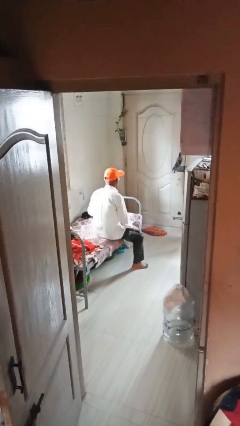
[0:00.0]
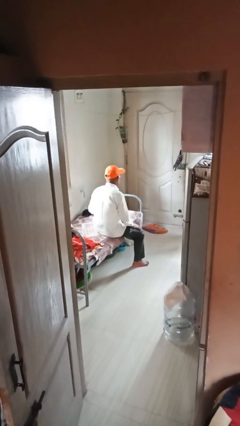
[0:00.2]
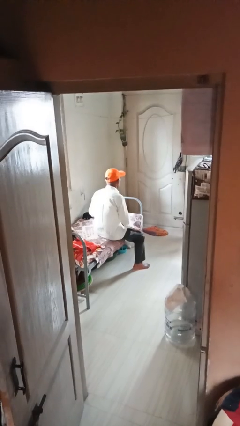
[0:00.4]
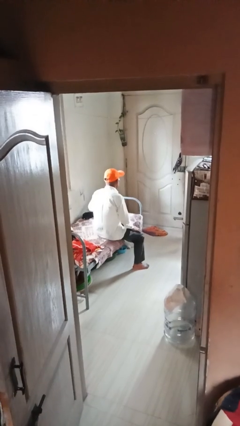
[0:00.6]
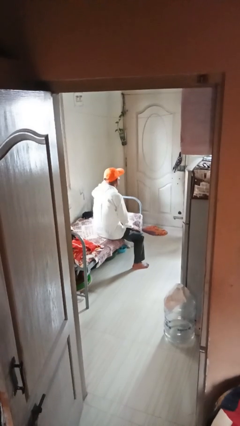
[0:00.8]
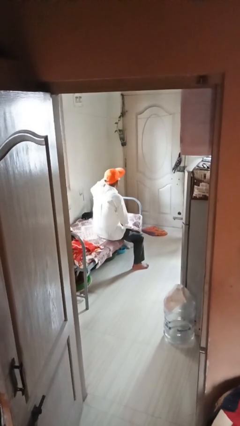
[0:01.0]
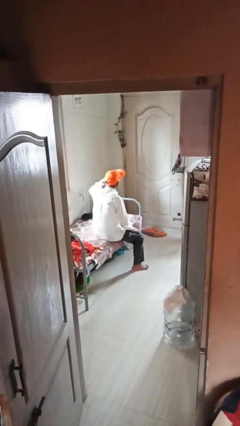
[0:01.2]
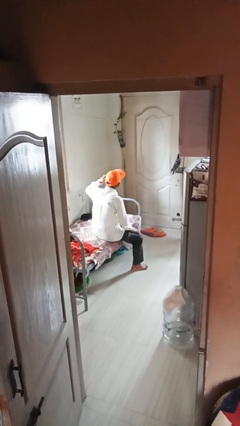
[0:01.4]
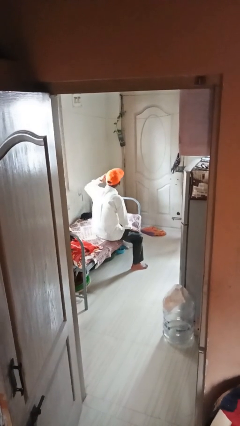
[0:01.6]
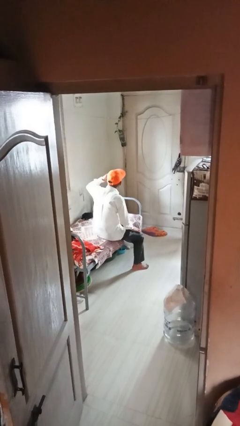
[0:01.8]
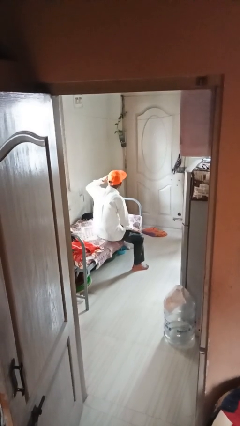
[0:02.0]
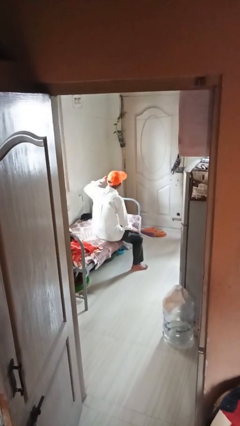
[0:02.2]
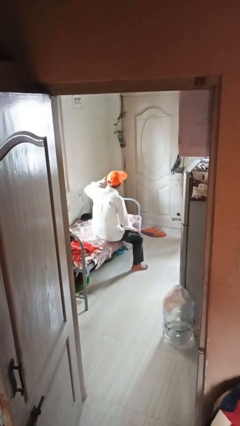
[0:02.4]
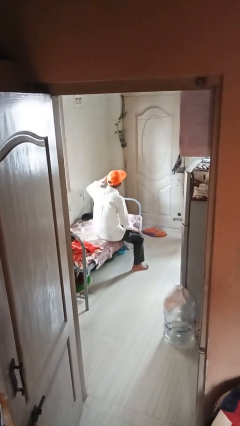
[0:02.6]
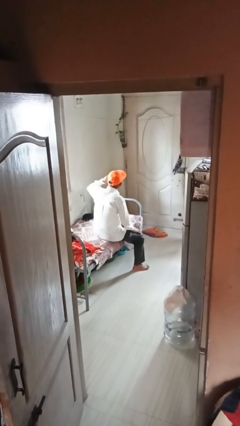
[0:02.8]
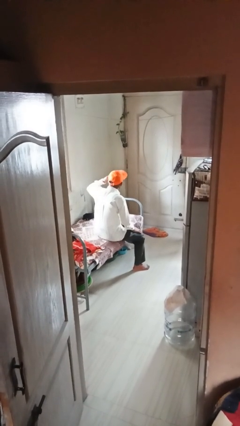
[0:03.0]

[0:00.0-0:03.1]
person rubs eyes

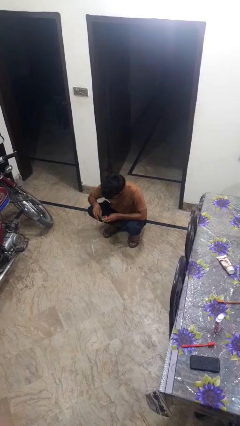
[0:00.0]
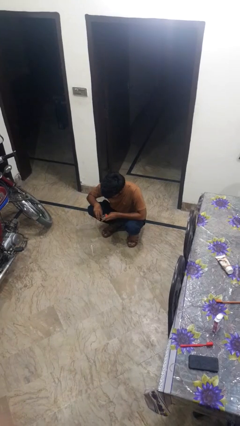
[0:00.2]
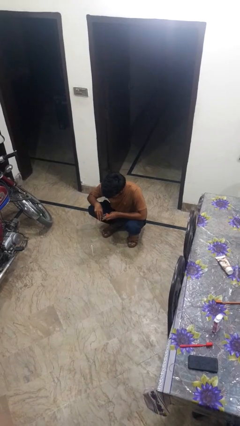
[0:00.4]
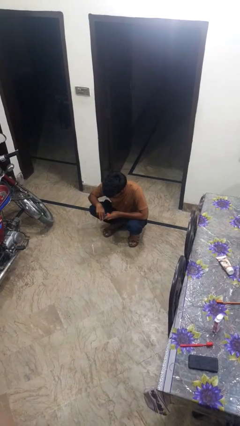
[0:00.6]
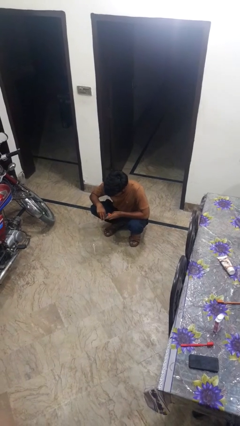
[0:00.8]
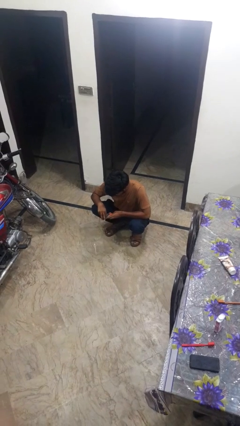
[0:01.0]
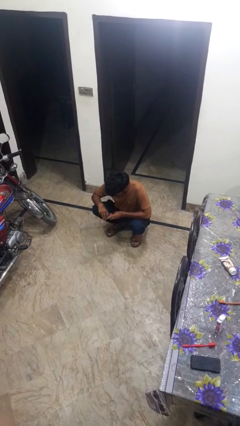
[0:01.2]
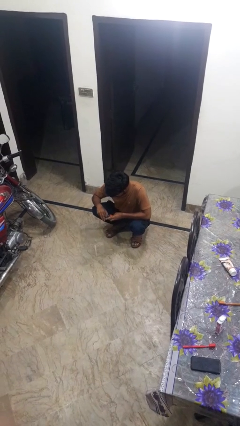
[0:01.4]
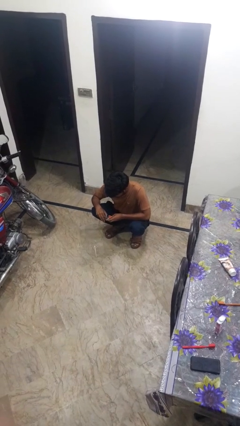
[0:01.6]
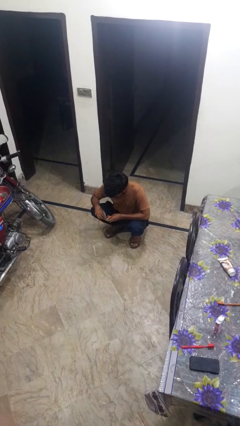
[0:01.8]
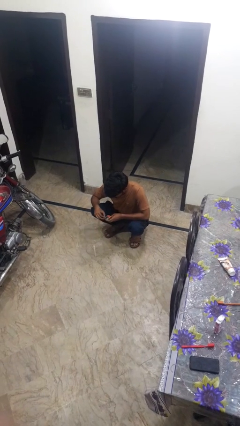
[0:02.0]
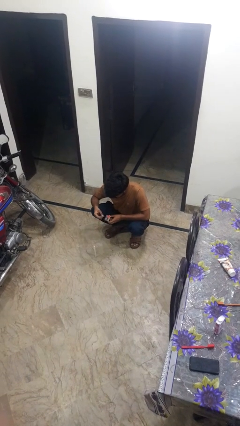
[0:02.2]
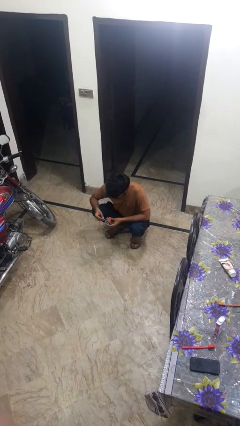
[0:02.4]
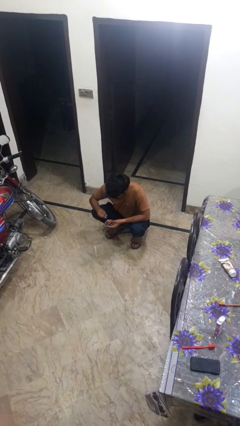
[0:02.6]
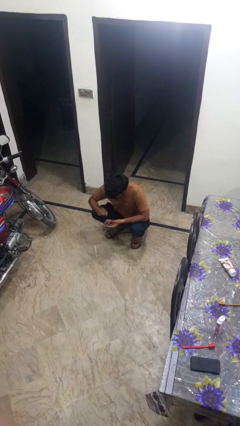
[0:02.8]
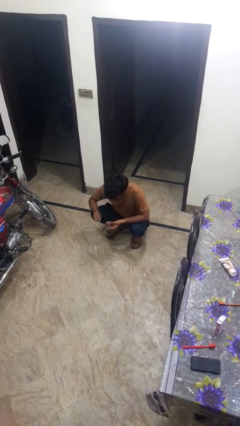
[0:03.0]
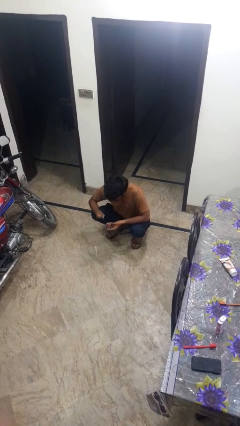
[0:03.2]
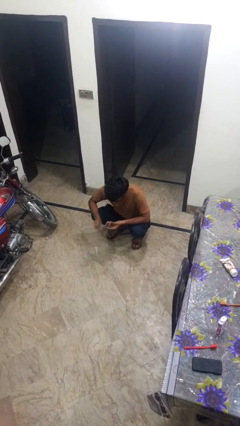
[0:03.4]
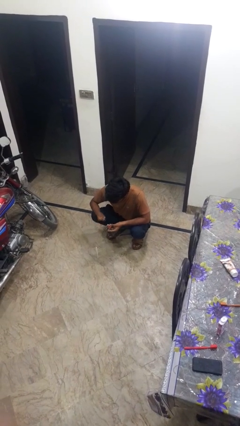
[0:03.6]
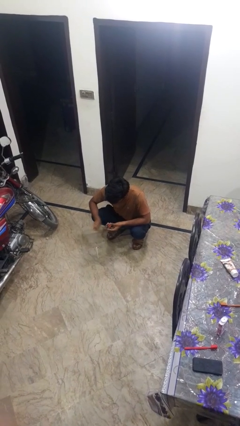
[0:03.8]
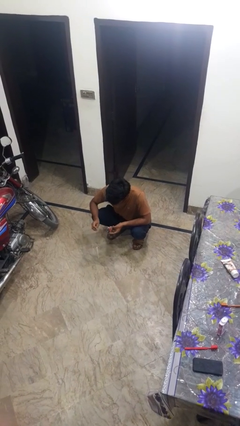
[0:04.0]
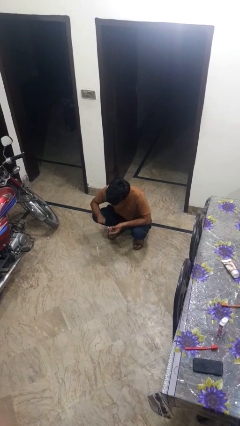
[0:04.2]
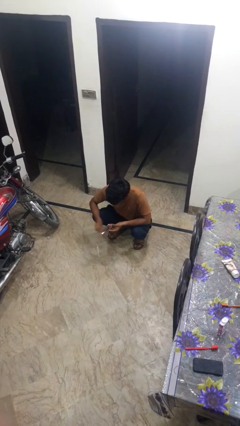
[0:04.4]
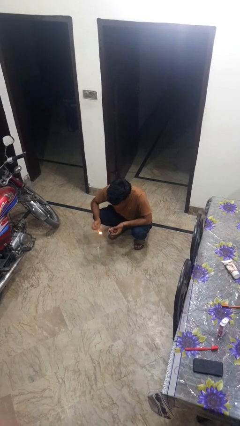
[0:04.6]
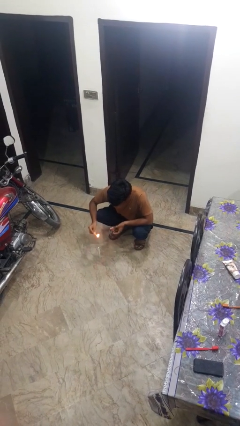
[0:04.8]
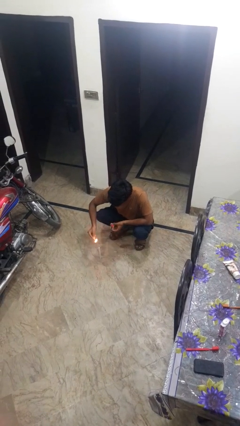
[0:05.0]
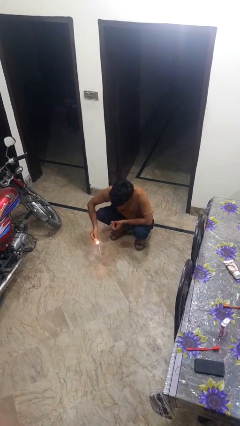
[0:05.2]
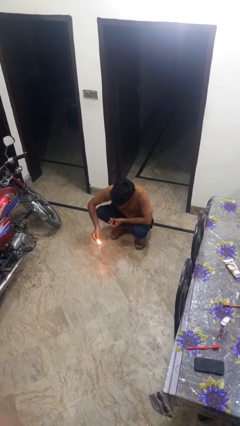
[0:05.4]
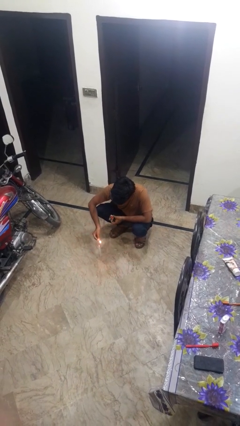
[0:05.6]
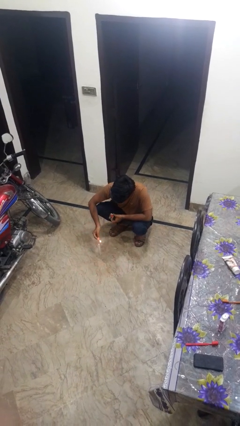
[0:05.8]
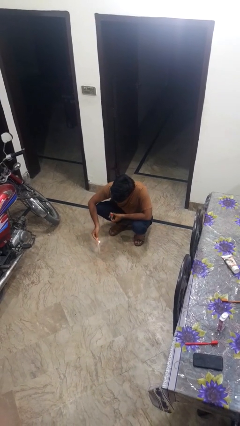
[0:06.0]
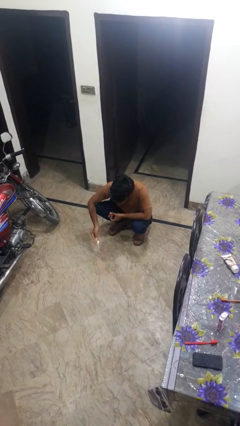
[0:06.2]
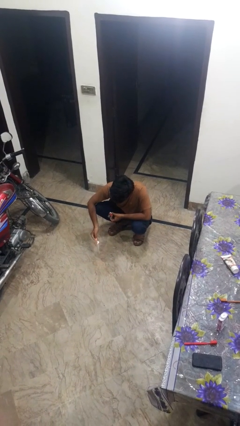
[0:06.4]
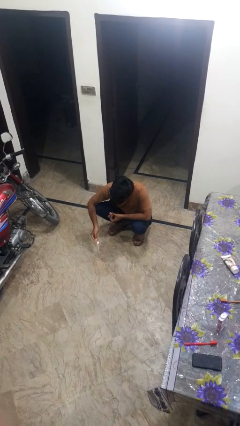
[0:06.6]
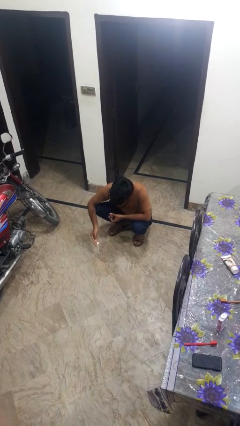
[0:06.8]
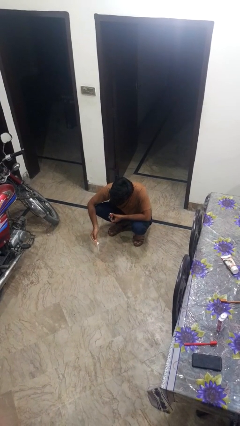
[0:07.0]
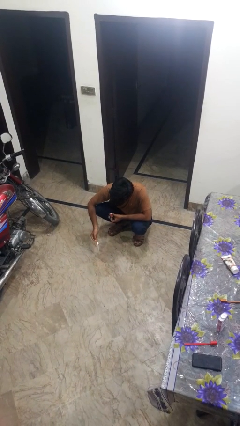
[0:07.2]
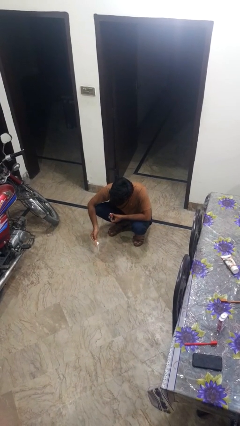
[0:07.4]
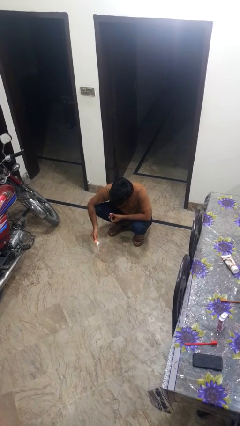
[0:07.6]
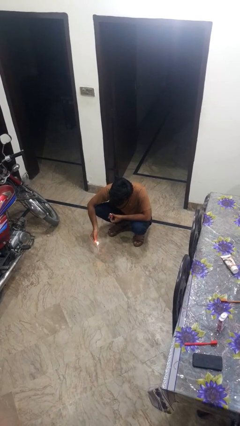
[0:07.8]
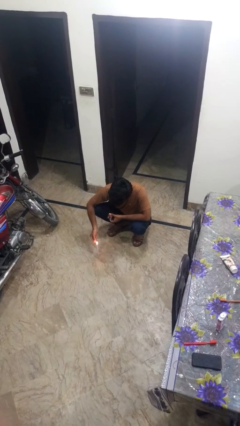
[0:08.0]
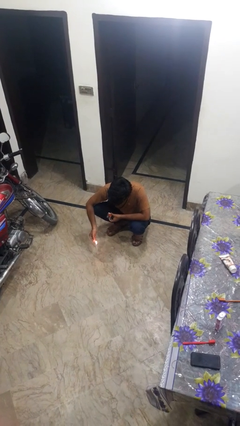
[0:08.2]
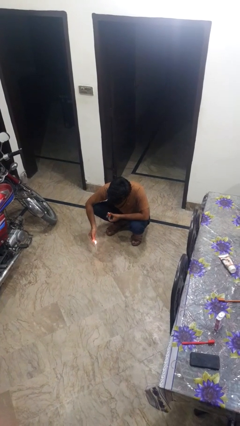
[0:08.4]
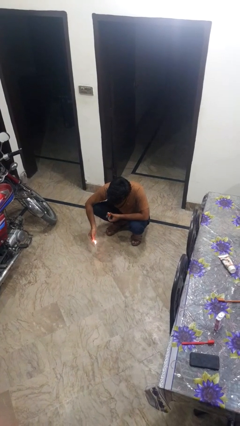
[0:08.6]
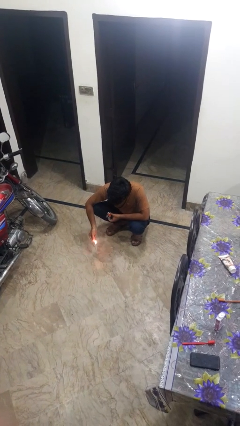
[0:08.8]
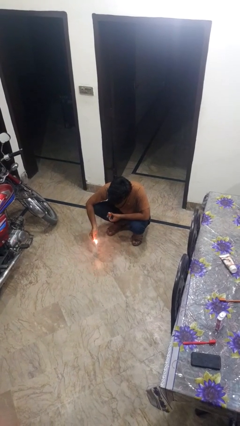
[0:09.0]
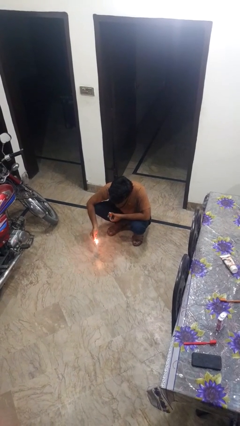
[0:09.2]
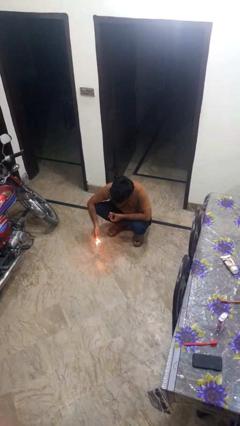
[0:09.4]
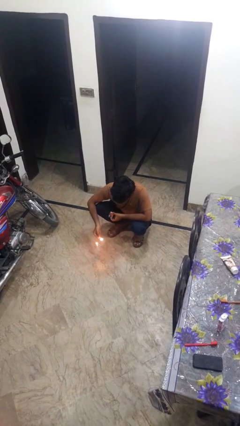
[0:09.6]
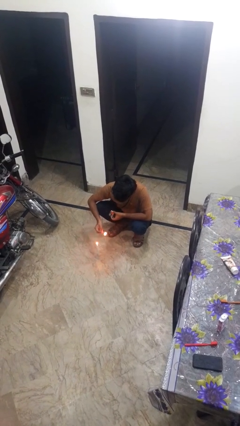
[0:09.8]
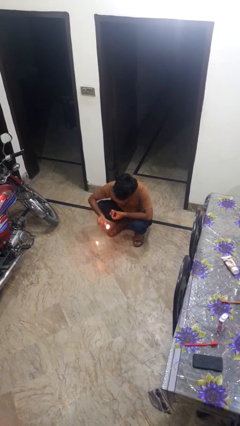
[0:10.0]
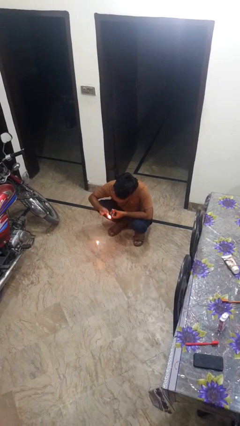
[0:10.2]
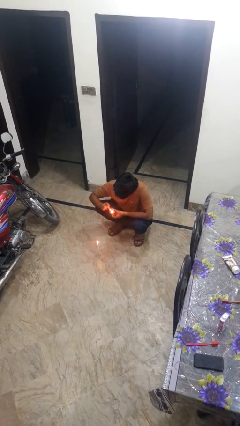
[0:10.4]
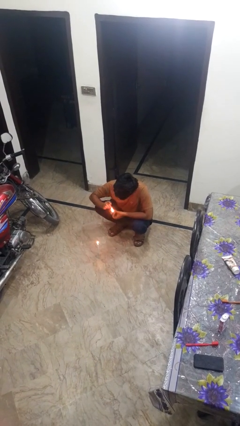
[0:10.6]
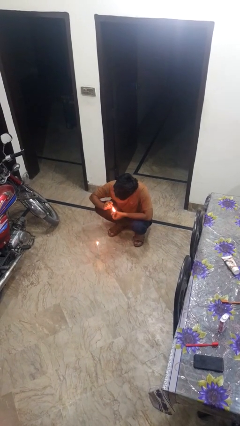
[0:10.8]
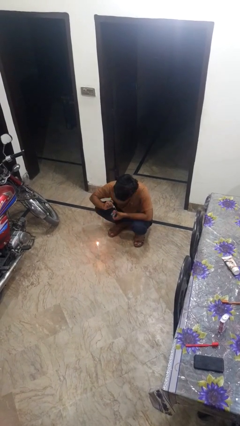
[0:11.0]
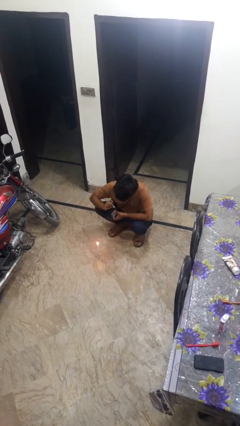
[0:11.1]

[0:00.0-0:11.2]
person lights candle

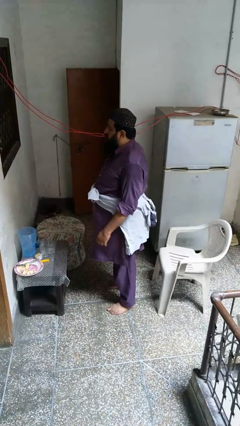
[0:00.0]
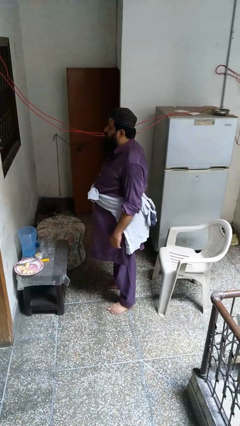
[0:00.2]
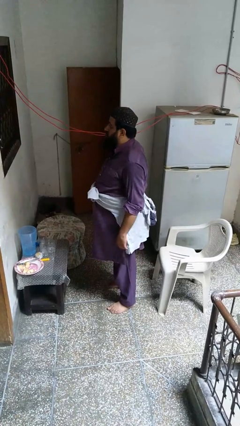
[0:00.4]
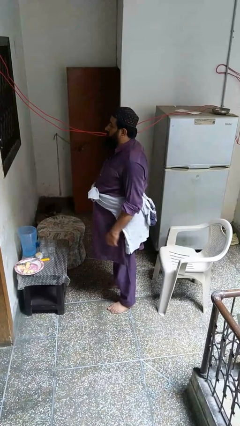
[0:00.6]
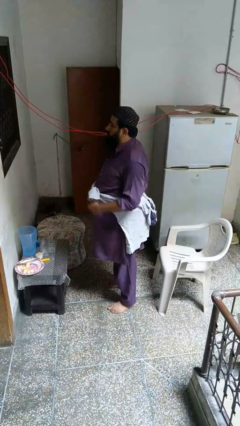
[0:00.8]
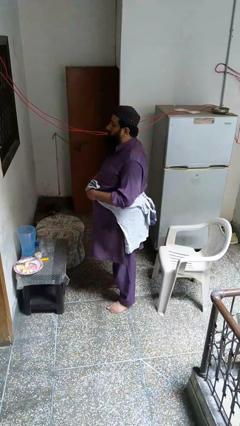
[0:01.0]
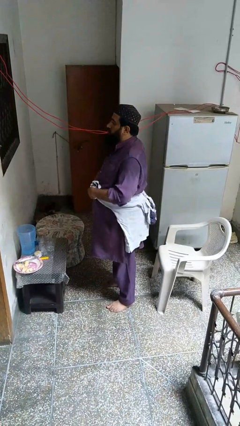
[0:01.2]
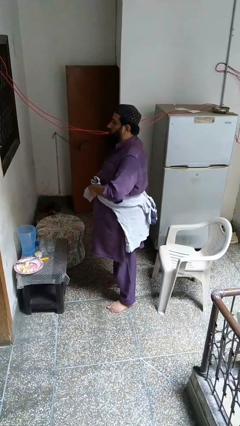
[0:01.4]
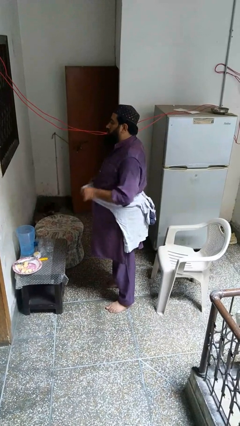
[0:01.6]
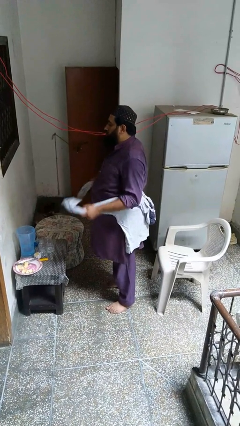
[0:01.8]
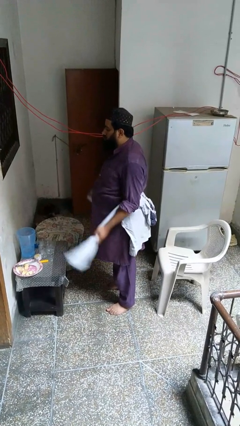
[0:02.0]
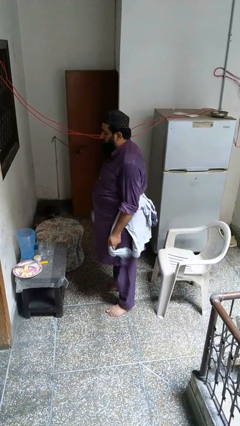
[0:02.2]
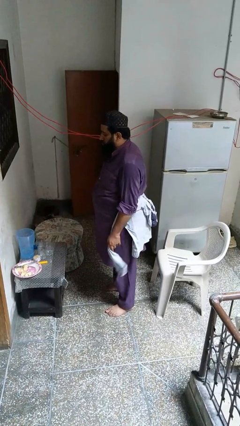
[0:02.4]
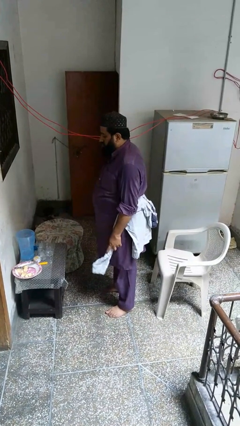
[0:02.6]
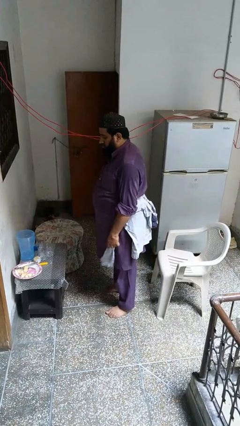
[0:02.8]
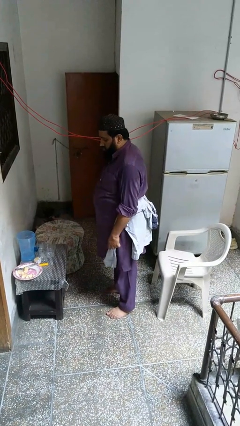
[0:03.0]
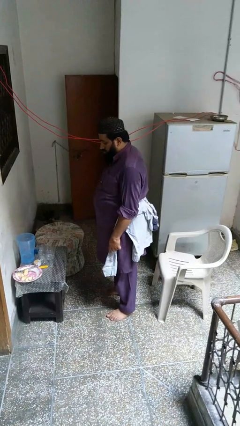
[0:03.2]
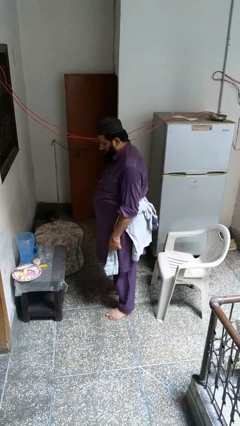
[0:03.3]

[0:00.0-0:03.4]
person unties jacket around waist

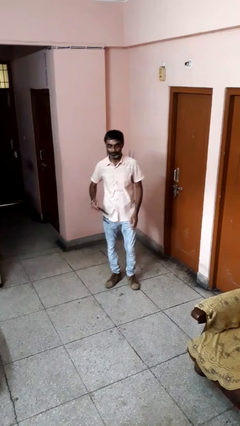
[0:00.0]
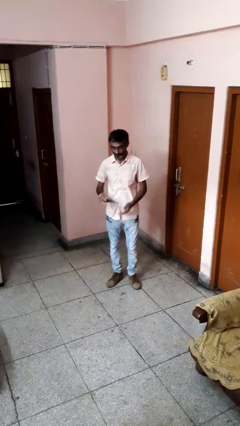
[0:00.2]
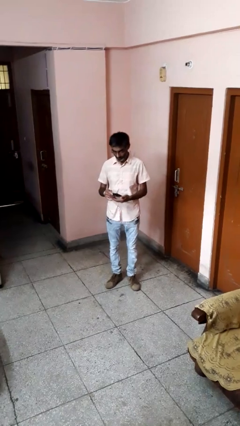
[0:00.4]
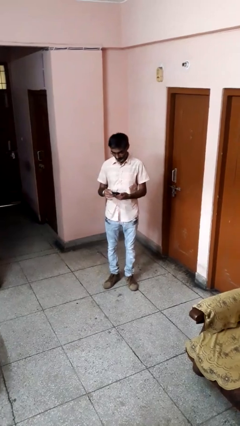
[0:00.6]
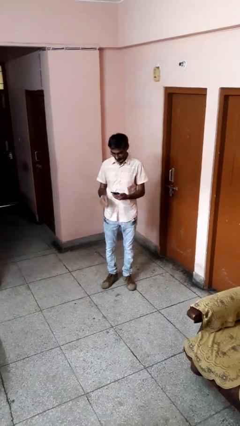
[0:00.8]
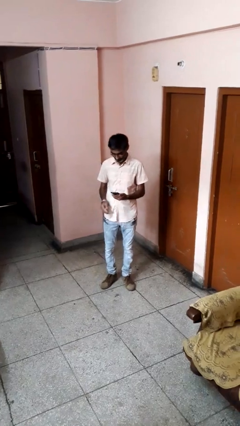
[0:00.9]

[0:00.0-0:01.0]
person takes phone from pocket
